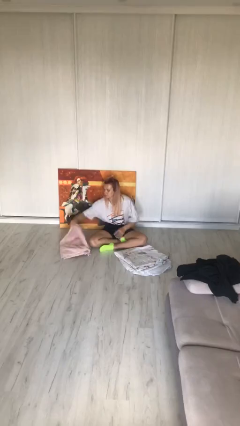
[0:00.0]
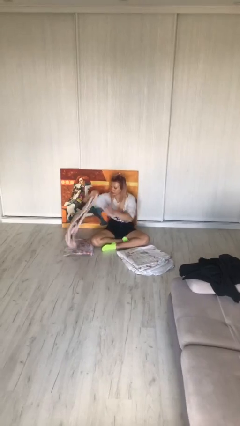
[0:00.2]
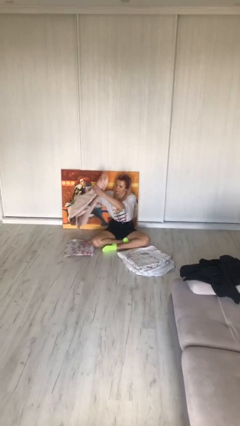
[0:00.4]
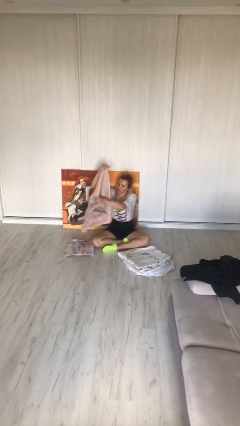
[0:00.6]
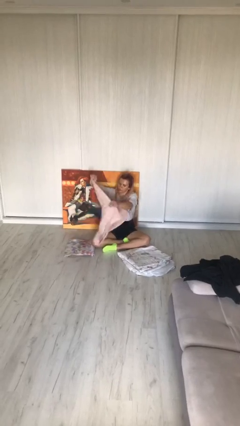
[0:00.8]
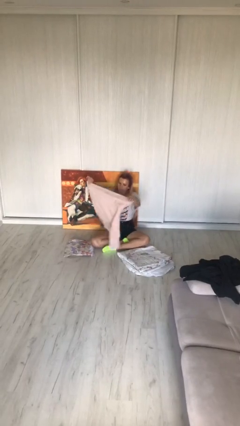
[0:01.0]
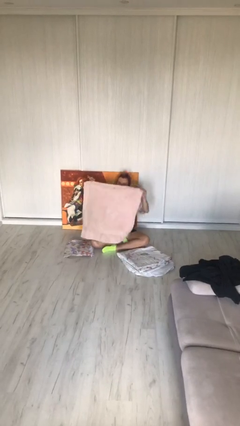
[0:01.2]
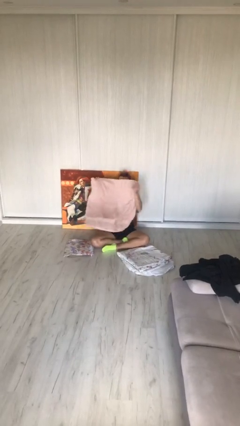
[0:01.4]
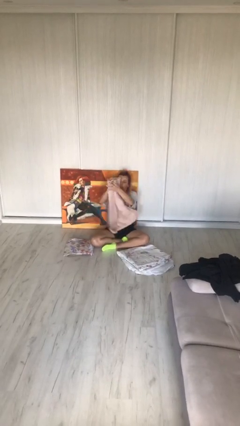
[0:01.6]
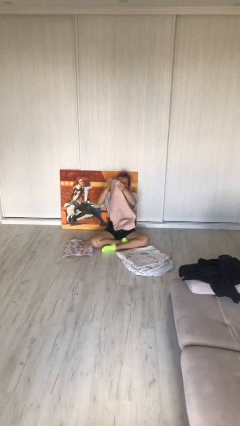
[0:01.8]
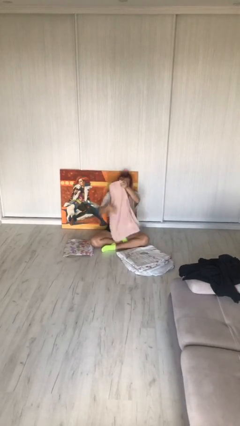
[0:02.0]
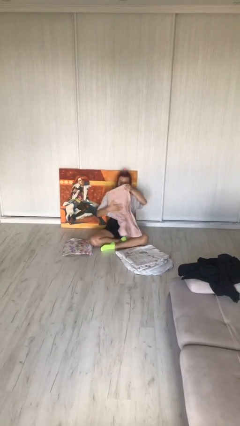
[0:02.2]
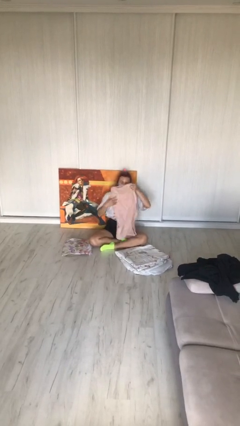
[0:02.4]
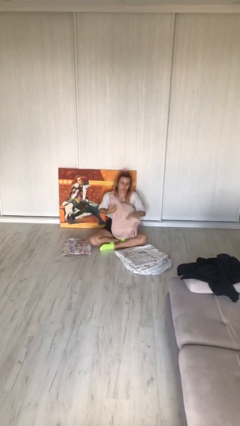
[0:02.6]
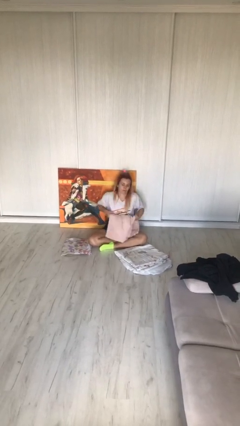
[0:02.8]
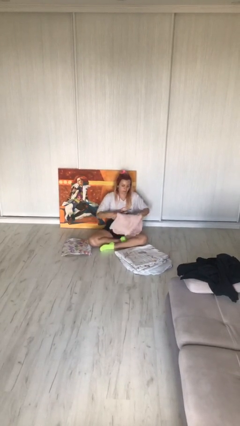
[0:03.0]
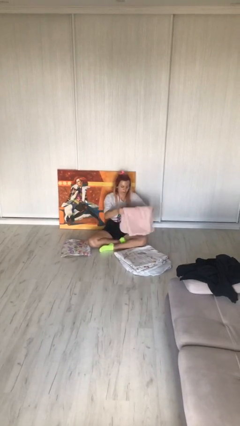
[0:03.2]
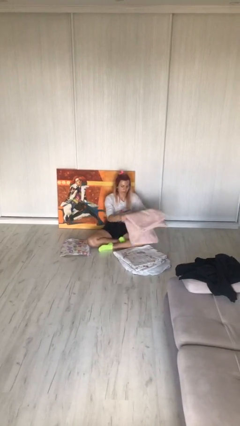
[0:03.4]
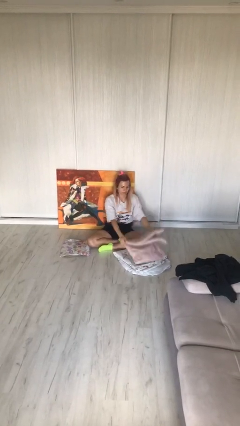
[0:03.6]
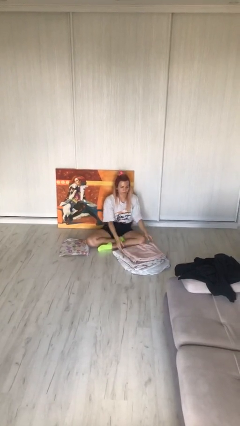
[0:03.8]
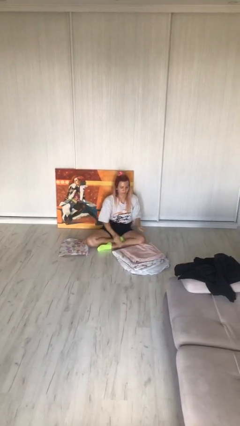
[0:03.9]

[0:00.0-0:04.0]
person folds towel

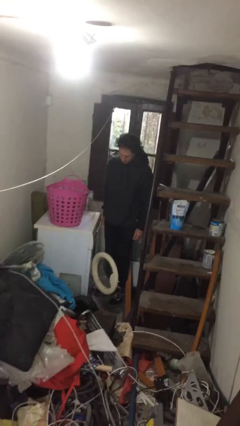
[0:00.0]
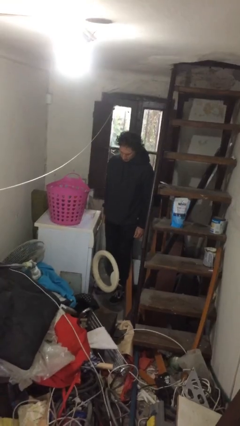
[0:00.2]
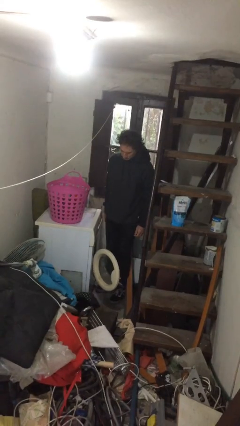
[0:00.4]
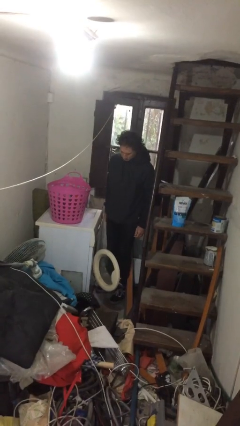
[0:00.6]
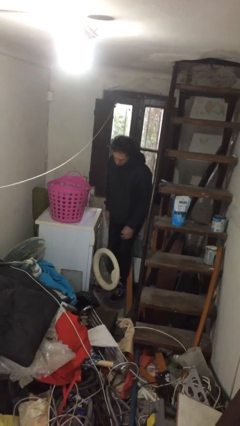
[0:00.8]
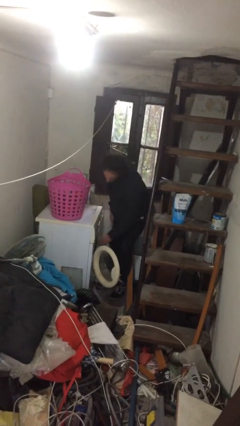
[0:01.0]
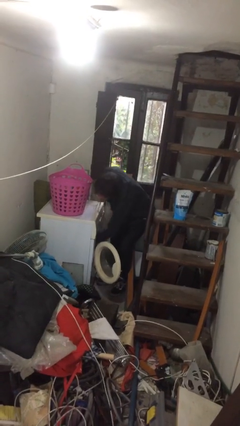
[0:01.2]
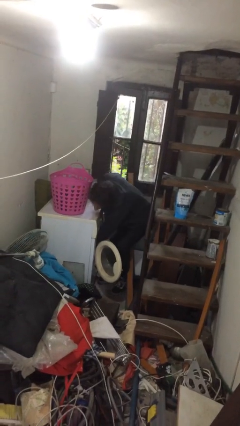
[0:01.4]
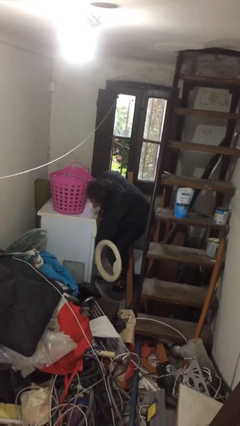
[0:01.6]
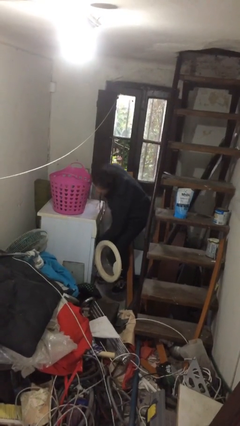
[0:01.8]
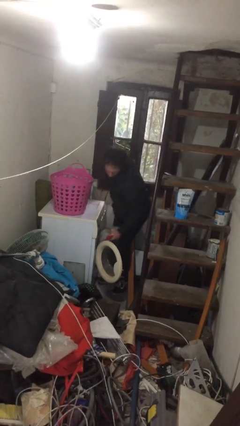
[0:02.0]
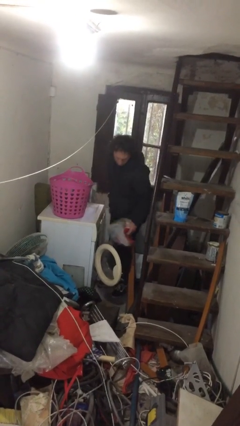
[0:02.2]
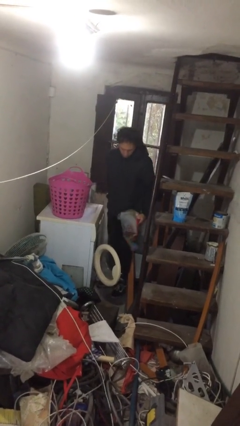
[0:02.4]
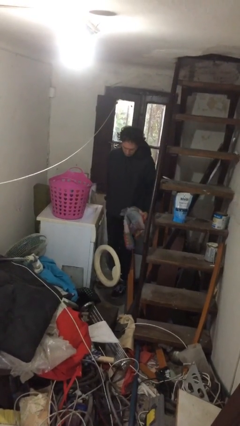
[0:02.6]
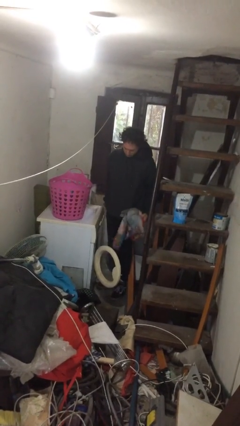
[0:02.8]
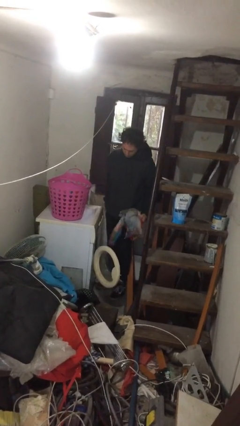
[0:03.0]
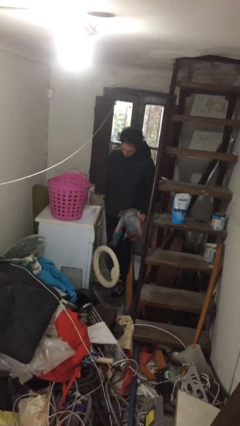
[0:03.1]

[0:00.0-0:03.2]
person unloads clotheswasher

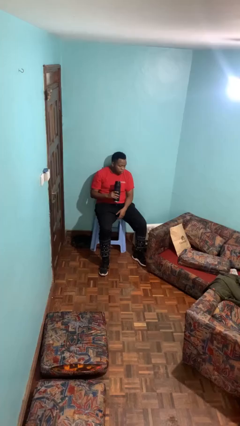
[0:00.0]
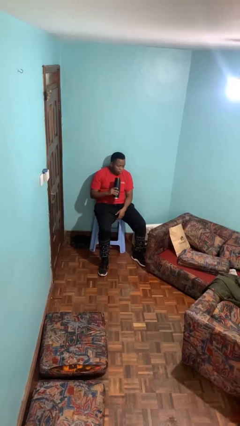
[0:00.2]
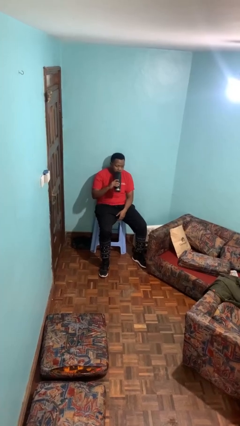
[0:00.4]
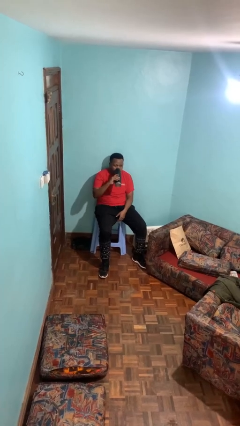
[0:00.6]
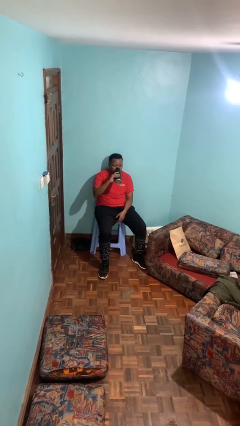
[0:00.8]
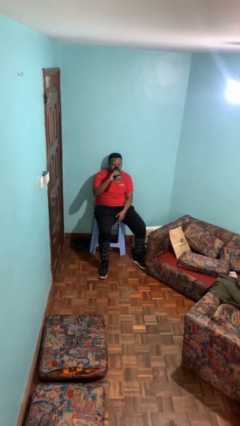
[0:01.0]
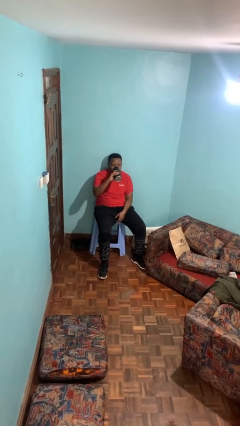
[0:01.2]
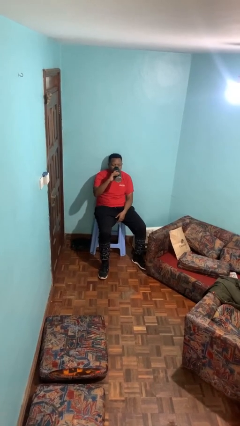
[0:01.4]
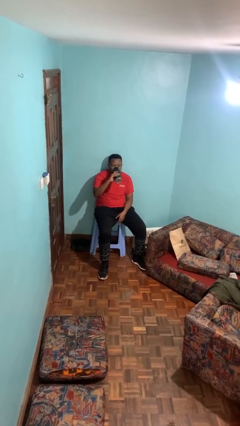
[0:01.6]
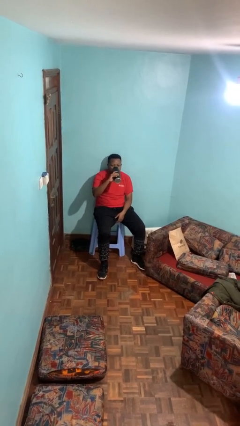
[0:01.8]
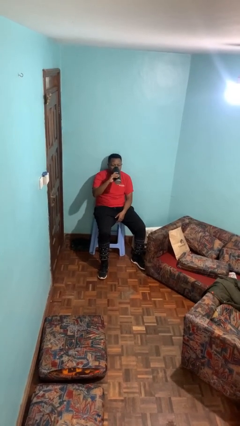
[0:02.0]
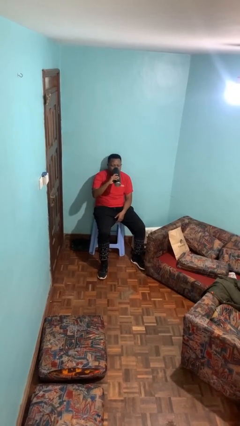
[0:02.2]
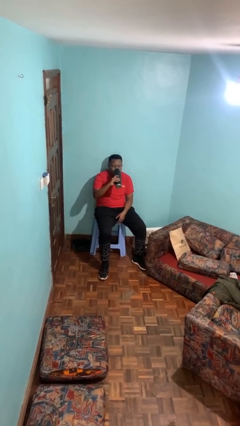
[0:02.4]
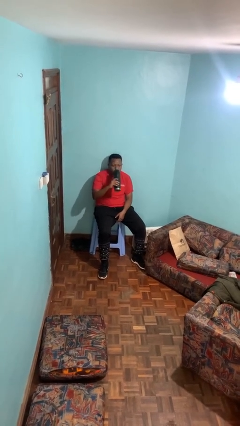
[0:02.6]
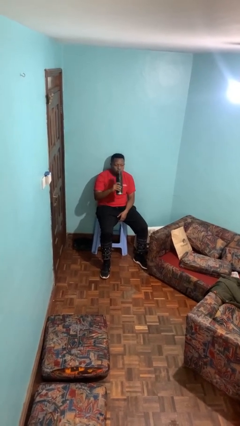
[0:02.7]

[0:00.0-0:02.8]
person drinks from bottle

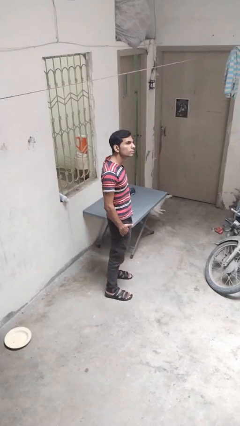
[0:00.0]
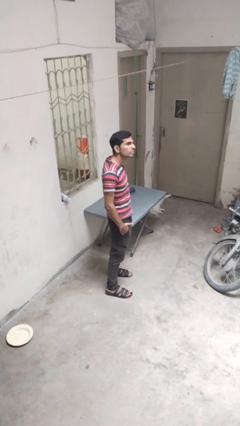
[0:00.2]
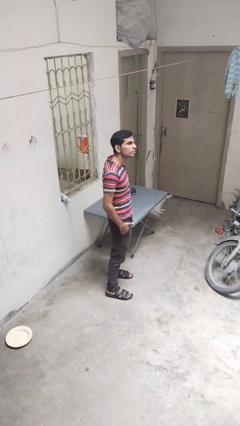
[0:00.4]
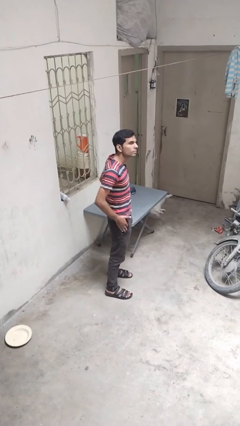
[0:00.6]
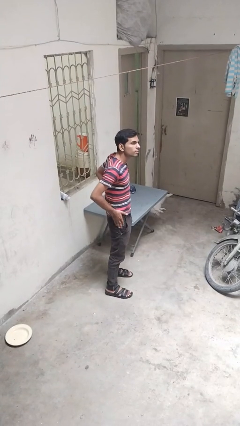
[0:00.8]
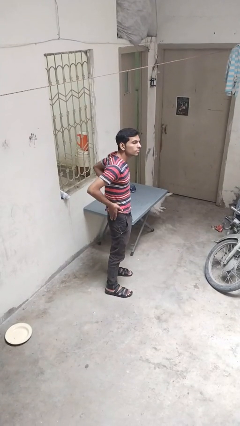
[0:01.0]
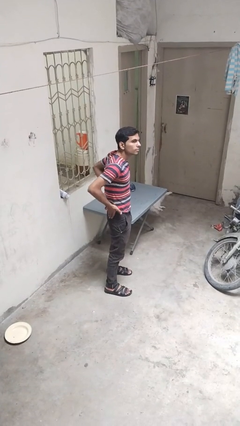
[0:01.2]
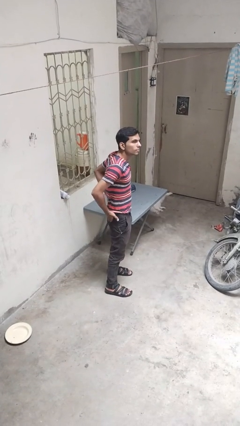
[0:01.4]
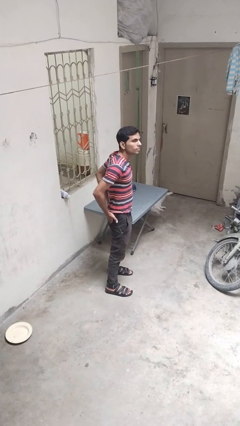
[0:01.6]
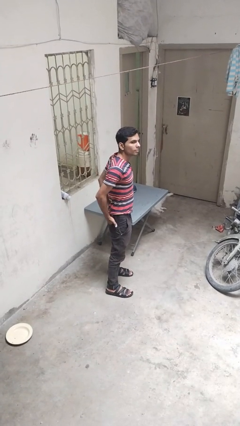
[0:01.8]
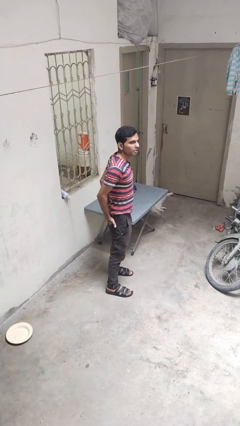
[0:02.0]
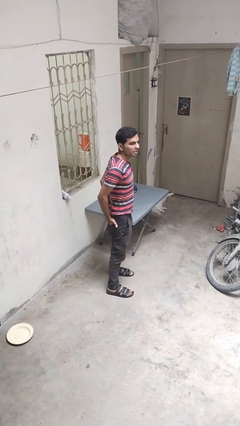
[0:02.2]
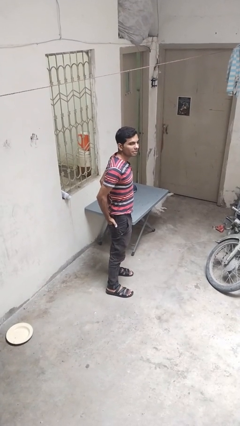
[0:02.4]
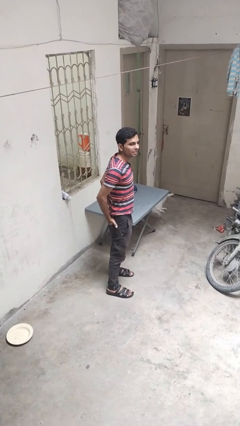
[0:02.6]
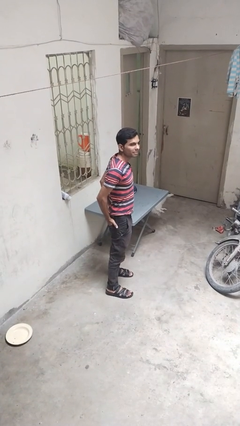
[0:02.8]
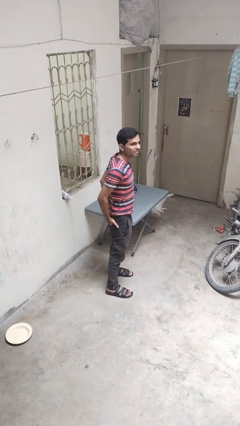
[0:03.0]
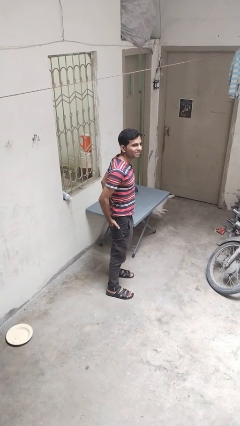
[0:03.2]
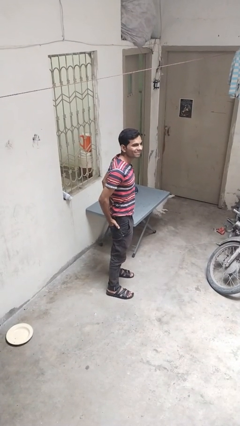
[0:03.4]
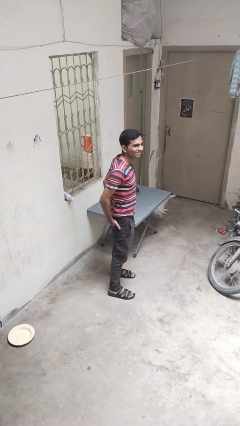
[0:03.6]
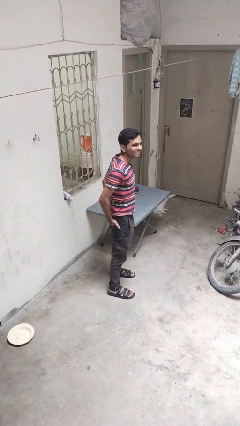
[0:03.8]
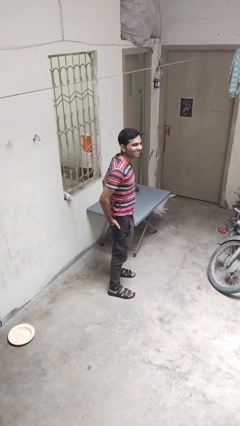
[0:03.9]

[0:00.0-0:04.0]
person puts hands in back pockets

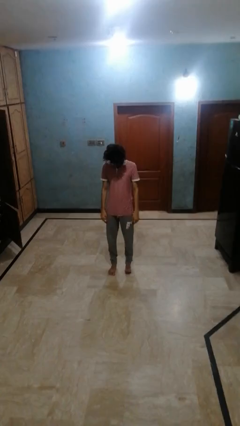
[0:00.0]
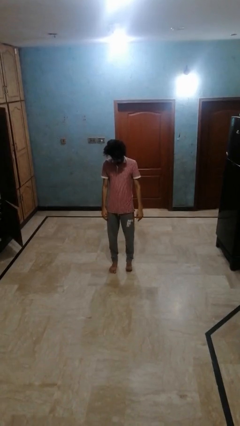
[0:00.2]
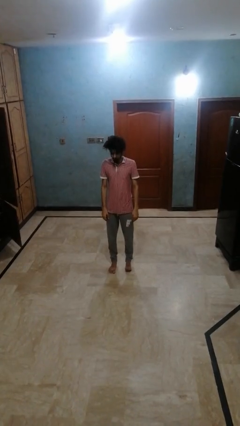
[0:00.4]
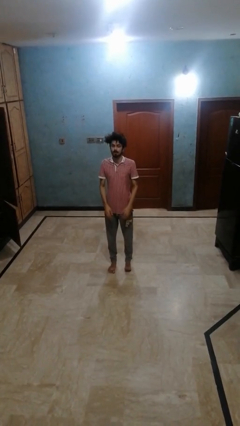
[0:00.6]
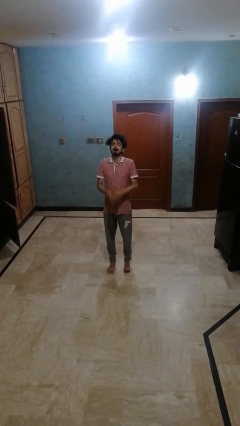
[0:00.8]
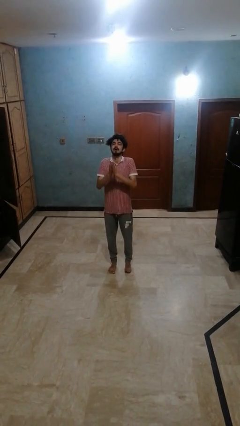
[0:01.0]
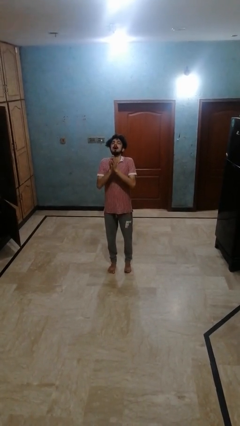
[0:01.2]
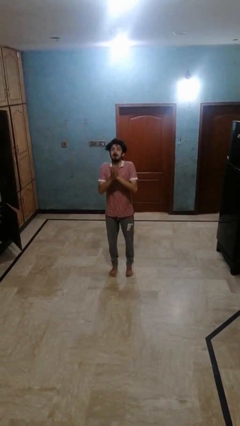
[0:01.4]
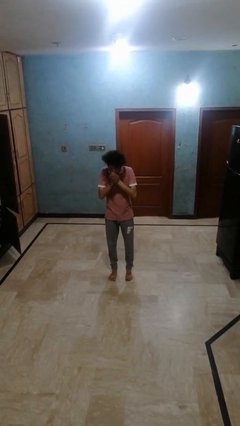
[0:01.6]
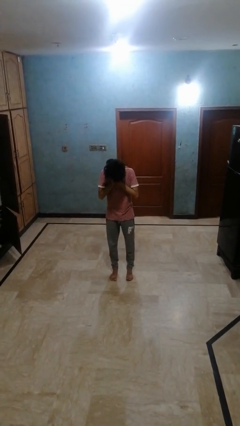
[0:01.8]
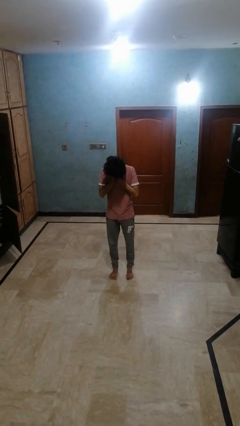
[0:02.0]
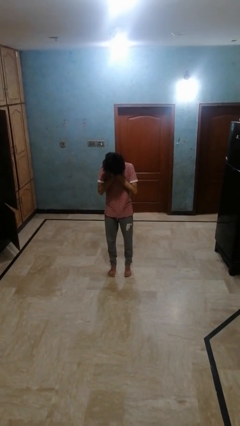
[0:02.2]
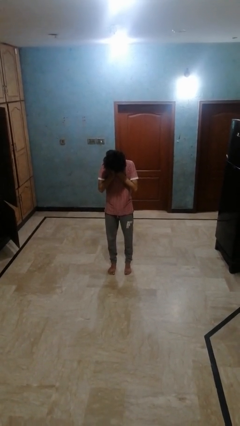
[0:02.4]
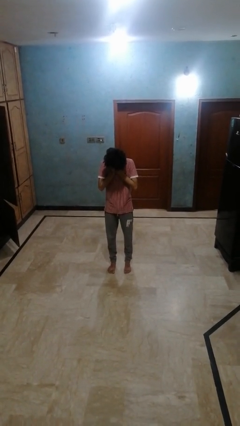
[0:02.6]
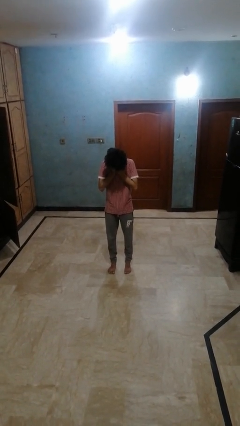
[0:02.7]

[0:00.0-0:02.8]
person sneezes into hand

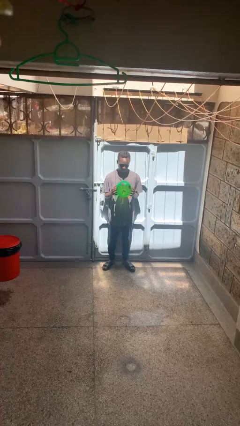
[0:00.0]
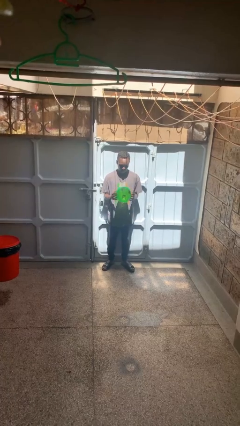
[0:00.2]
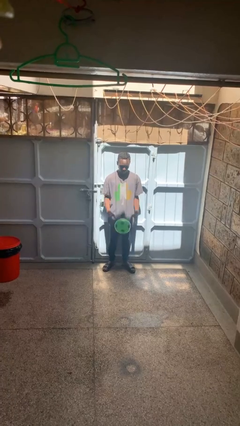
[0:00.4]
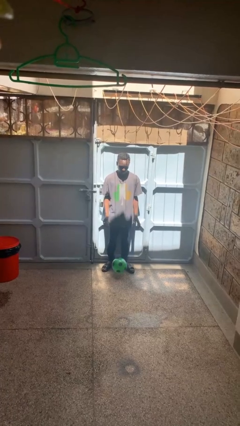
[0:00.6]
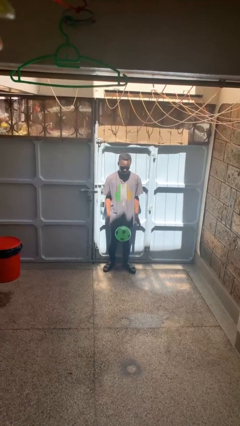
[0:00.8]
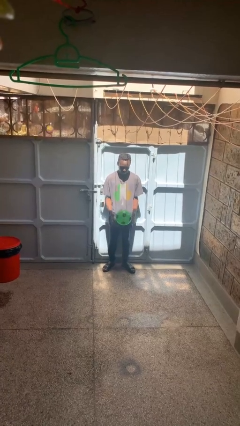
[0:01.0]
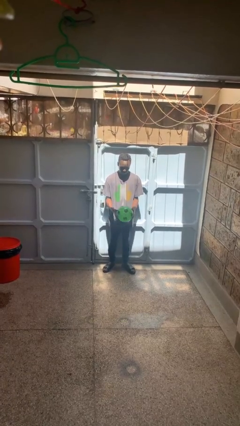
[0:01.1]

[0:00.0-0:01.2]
person bounces ball on floor
